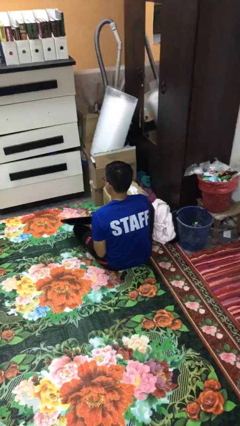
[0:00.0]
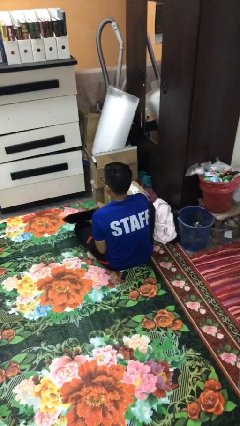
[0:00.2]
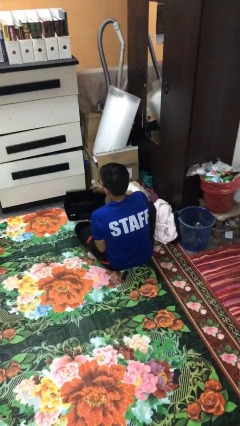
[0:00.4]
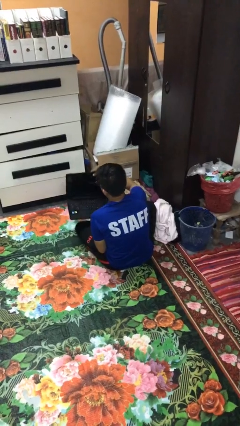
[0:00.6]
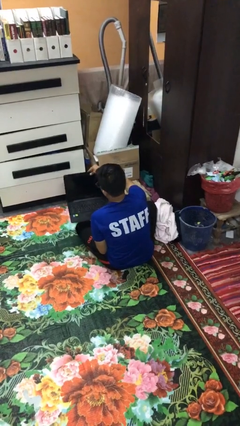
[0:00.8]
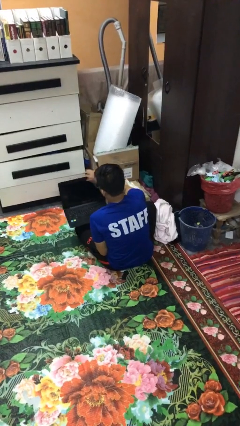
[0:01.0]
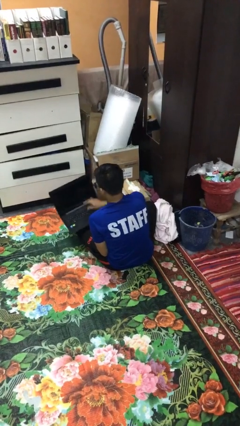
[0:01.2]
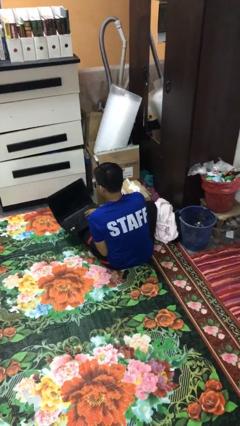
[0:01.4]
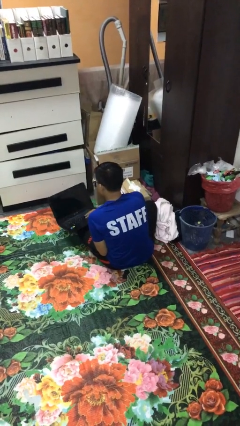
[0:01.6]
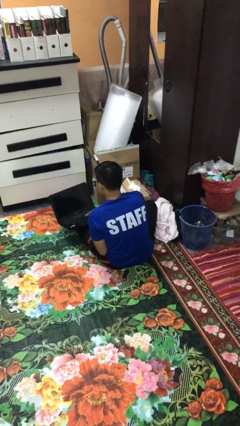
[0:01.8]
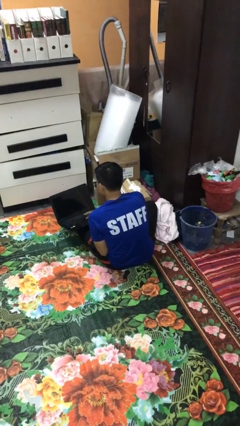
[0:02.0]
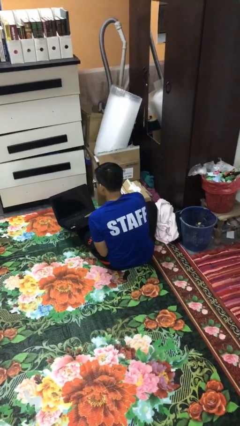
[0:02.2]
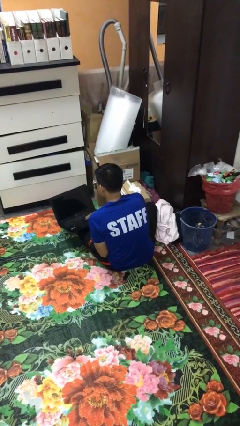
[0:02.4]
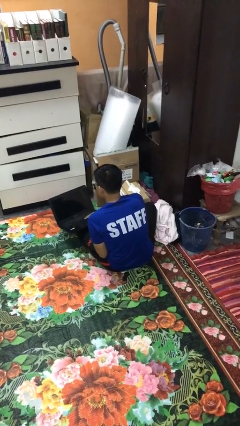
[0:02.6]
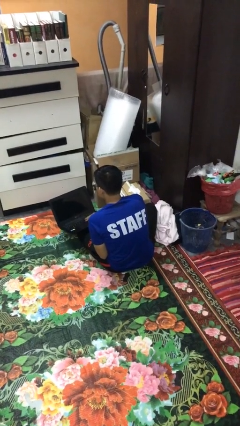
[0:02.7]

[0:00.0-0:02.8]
person opens laptop

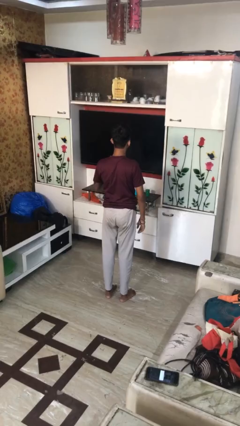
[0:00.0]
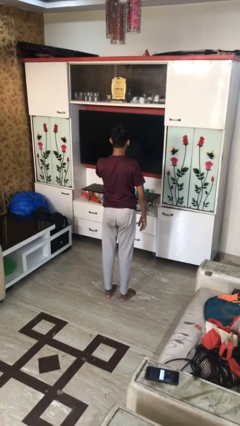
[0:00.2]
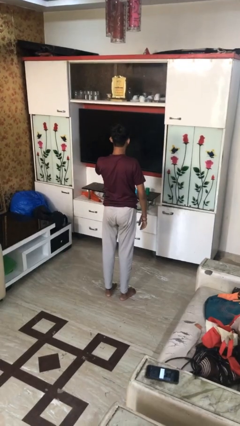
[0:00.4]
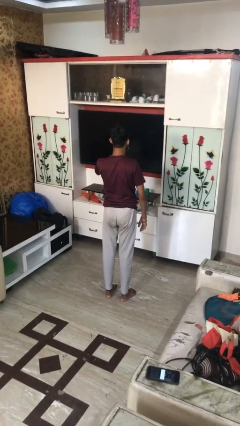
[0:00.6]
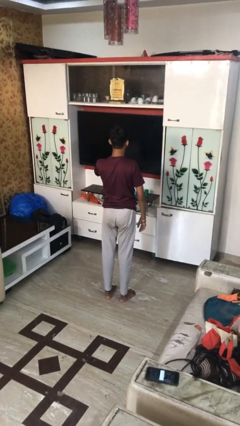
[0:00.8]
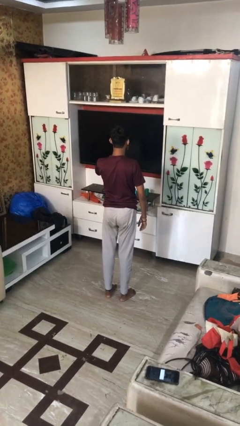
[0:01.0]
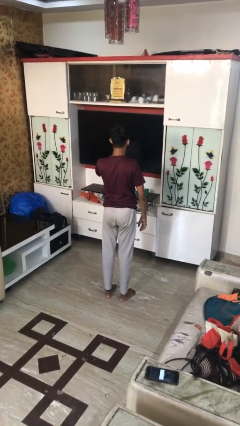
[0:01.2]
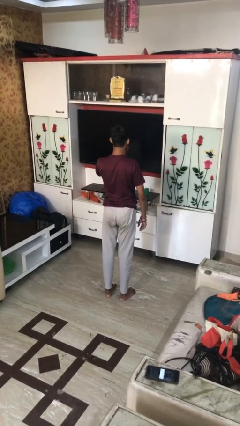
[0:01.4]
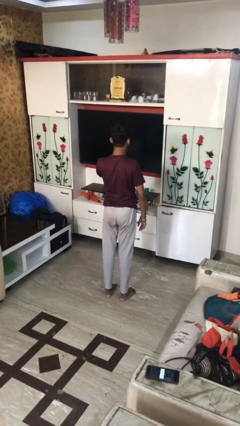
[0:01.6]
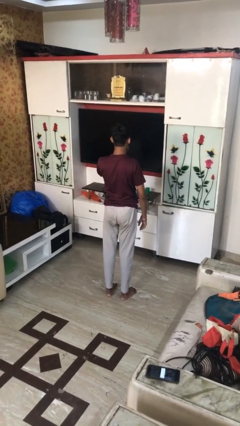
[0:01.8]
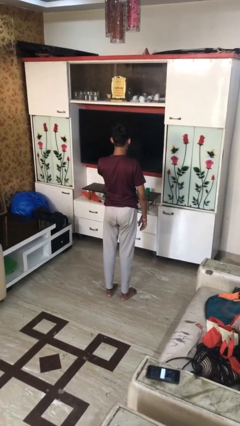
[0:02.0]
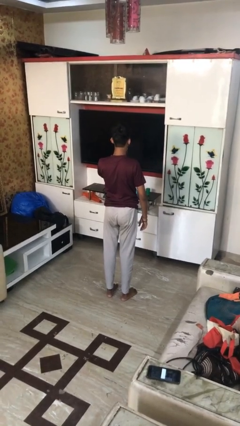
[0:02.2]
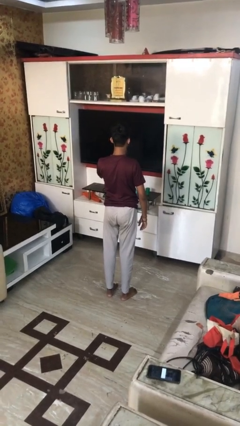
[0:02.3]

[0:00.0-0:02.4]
person strokes chin

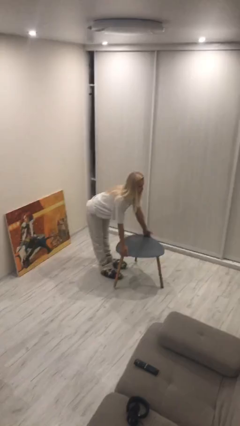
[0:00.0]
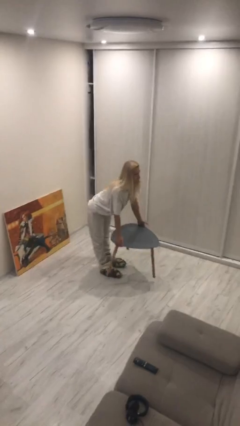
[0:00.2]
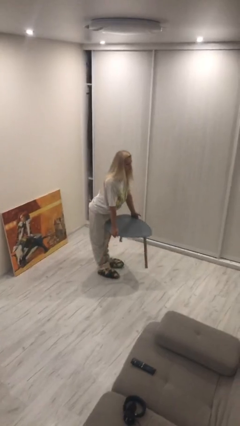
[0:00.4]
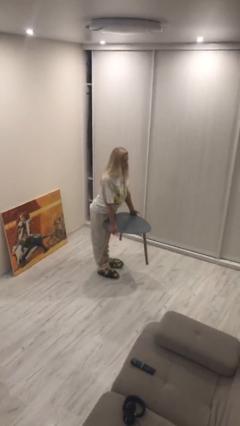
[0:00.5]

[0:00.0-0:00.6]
person picks up object from floor

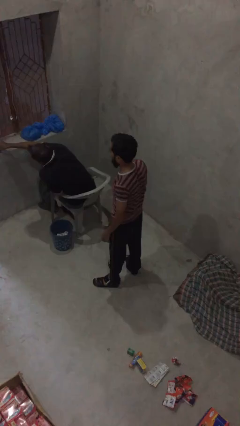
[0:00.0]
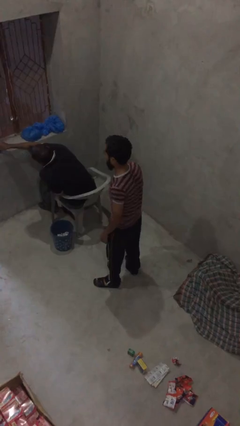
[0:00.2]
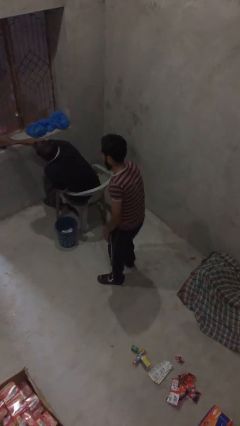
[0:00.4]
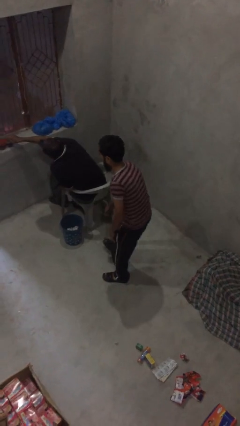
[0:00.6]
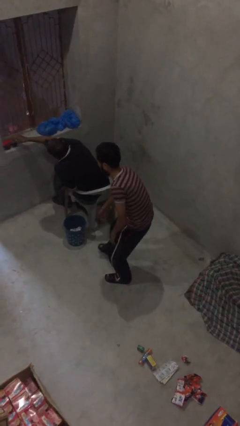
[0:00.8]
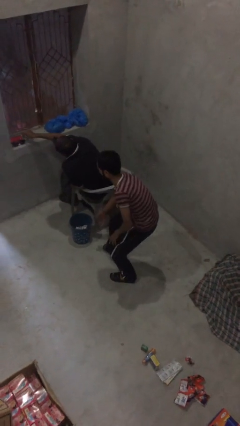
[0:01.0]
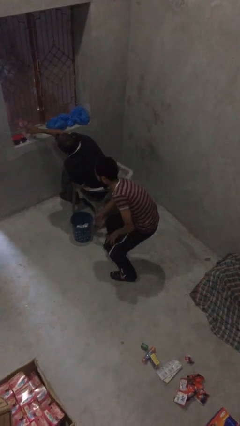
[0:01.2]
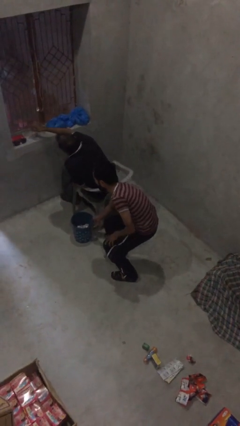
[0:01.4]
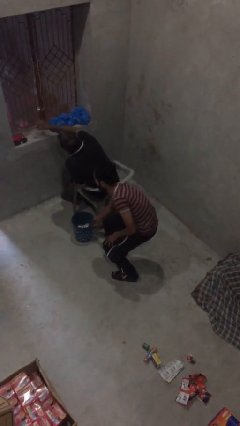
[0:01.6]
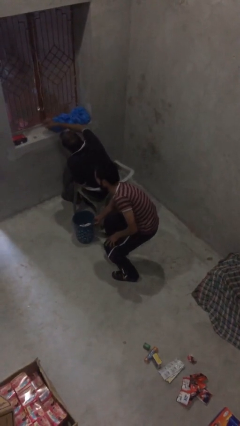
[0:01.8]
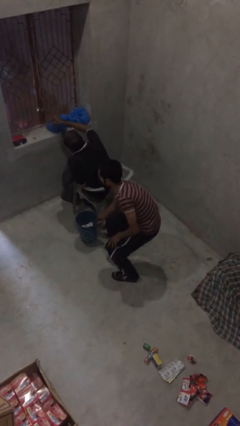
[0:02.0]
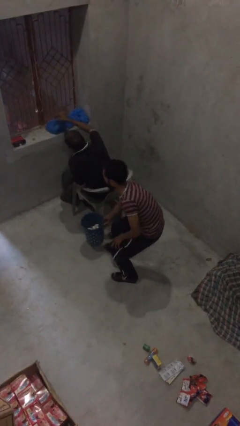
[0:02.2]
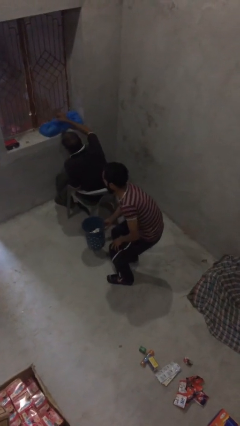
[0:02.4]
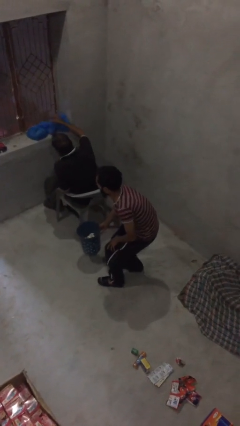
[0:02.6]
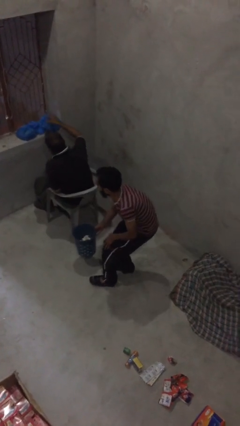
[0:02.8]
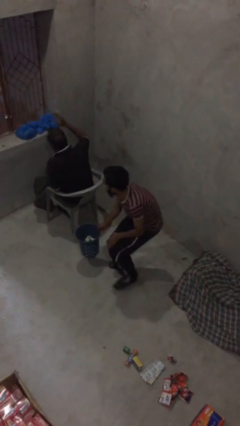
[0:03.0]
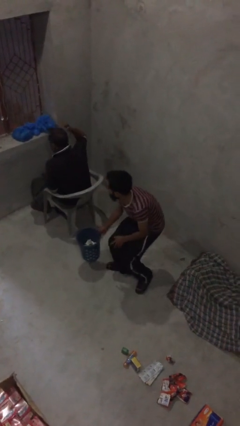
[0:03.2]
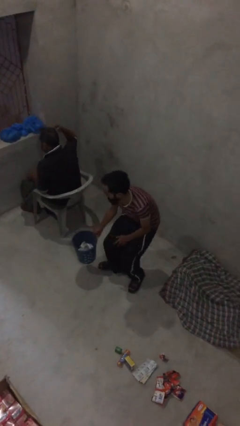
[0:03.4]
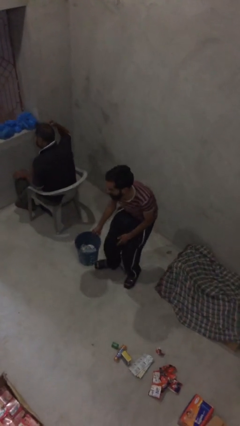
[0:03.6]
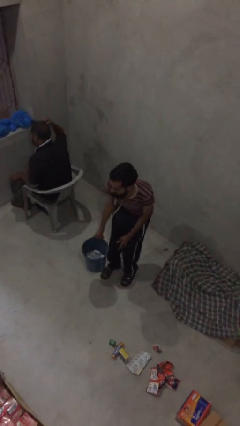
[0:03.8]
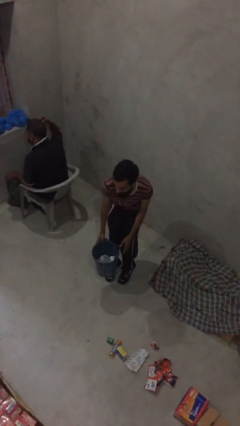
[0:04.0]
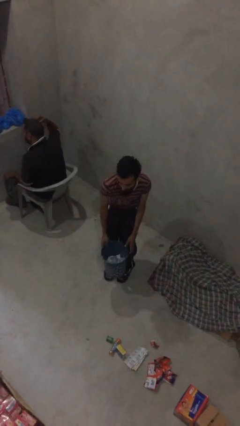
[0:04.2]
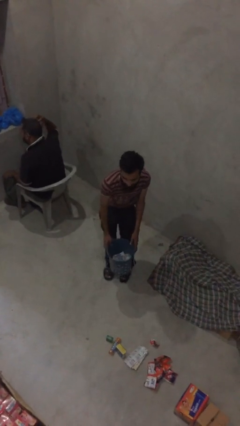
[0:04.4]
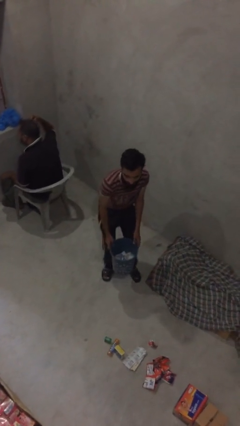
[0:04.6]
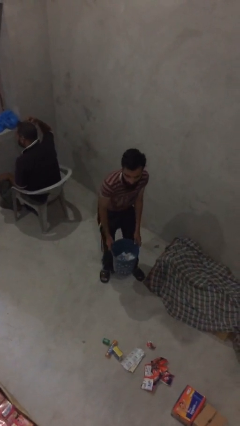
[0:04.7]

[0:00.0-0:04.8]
person steals object from person

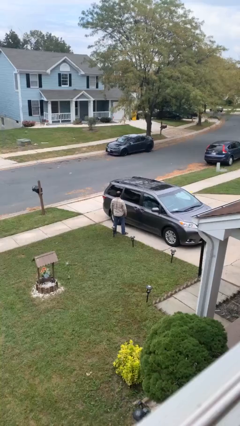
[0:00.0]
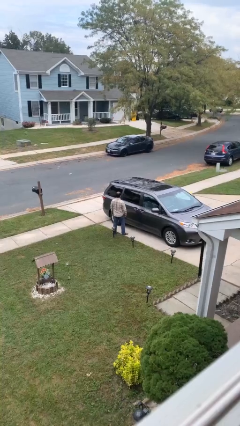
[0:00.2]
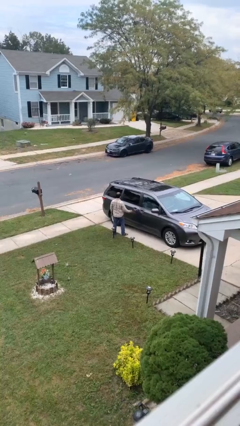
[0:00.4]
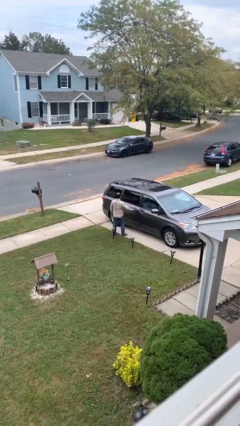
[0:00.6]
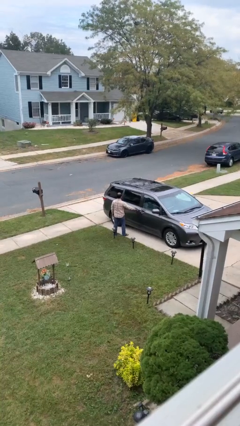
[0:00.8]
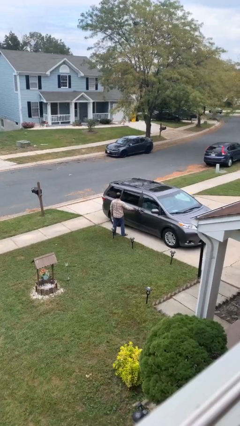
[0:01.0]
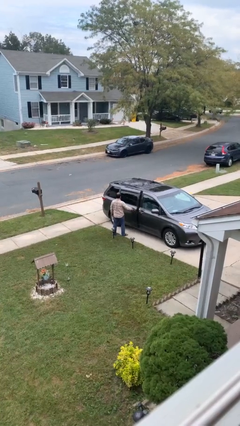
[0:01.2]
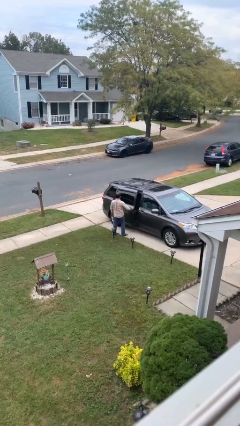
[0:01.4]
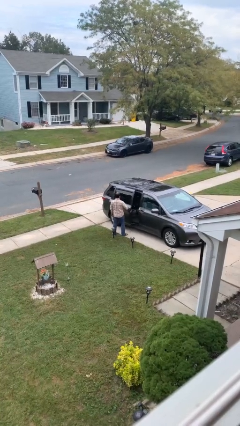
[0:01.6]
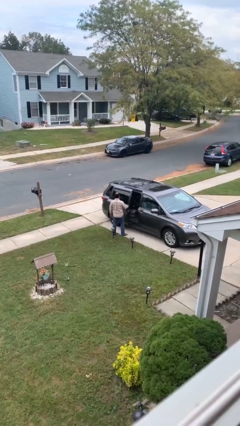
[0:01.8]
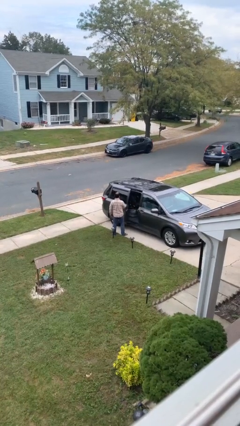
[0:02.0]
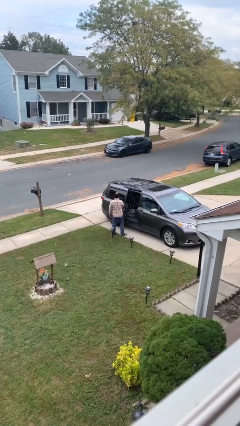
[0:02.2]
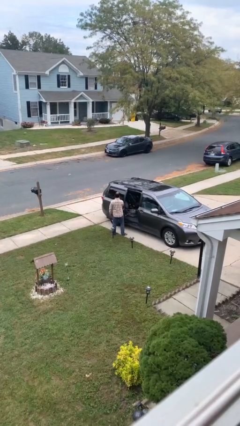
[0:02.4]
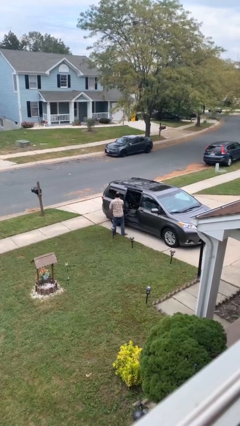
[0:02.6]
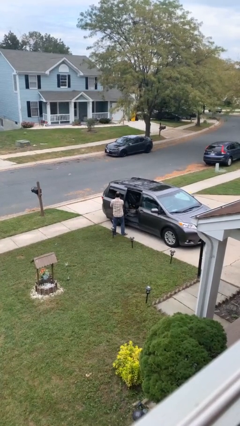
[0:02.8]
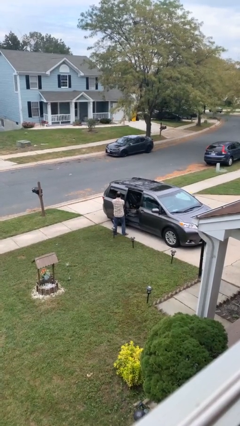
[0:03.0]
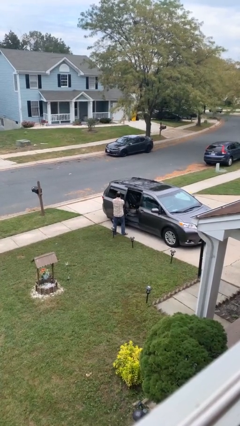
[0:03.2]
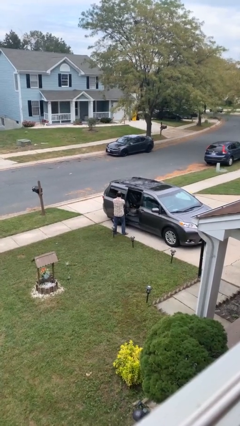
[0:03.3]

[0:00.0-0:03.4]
person opens car door

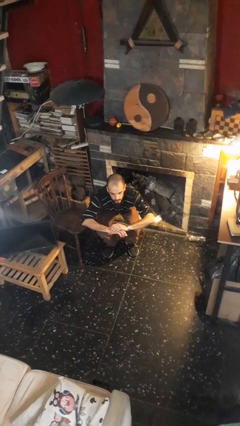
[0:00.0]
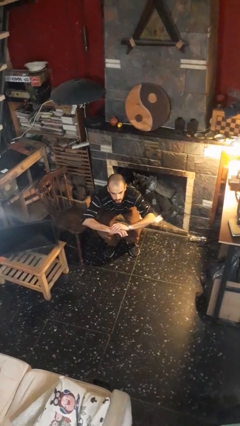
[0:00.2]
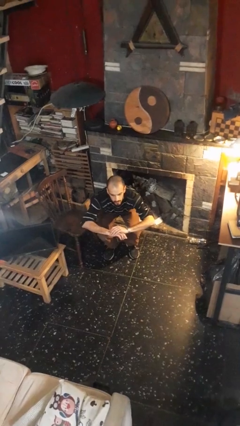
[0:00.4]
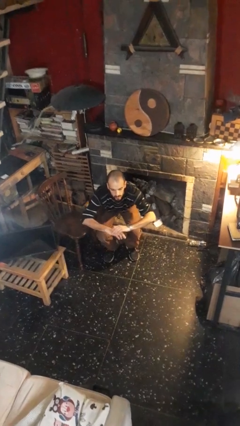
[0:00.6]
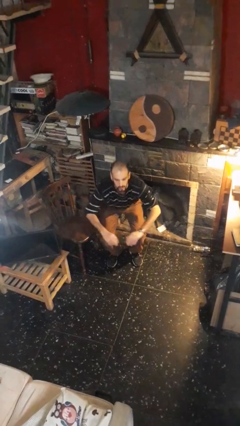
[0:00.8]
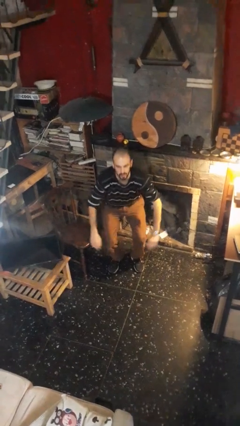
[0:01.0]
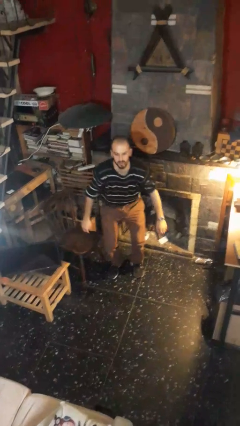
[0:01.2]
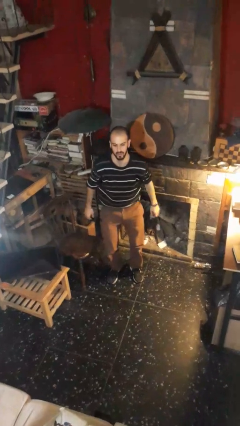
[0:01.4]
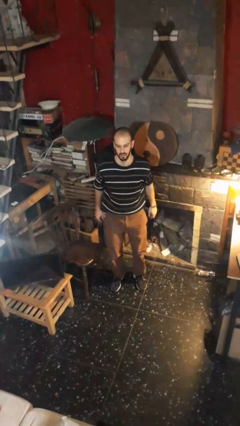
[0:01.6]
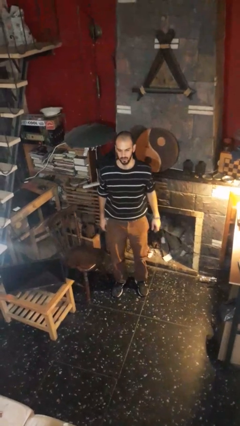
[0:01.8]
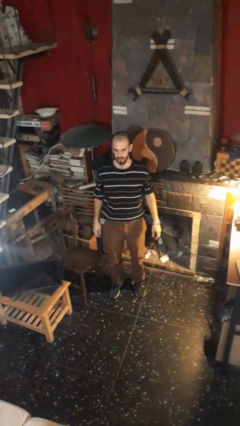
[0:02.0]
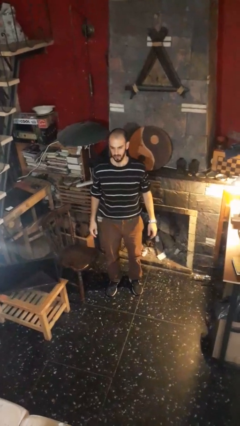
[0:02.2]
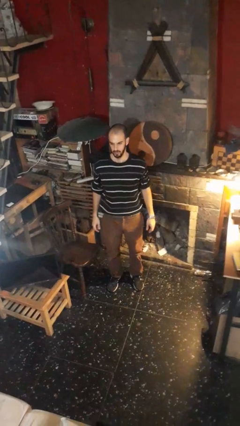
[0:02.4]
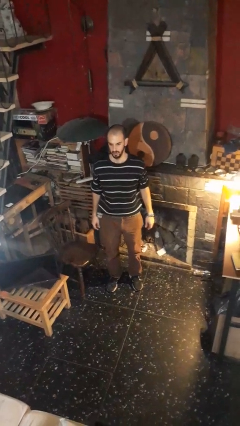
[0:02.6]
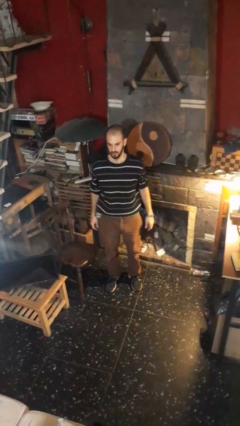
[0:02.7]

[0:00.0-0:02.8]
person stands up

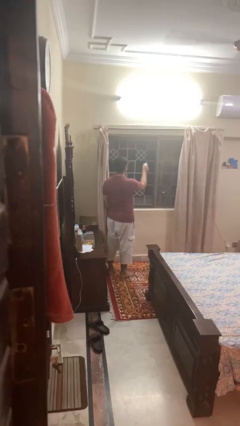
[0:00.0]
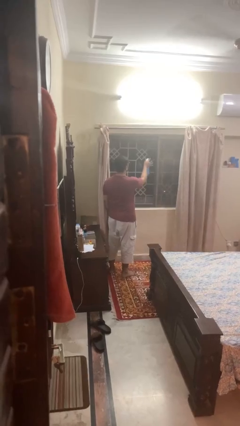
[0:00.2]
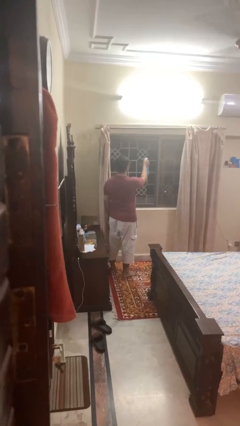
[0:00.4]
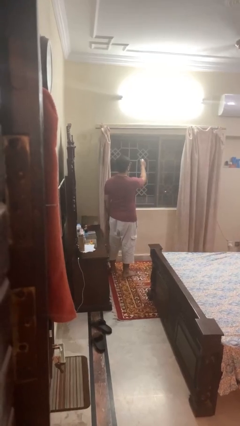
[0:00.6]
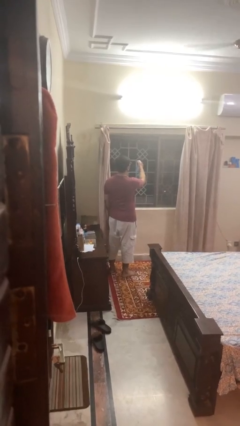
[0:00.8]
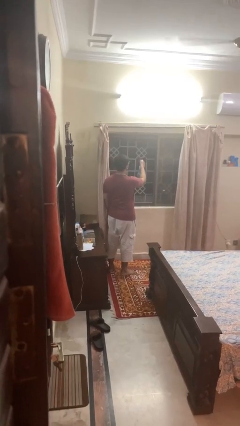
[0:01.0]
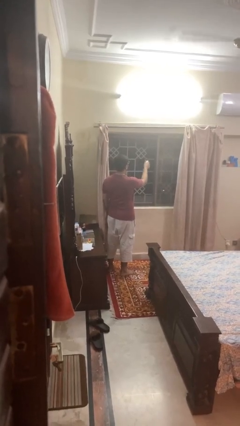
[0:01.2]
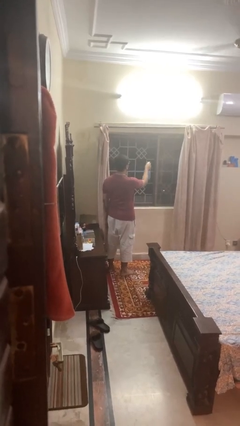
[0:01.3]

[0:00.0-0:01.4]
person sprays from bottle
